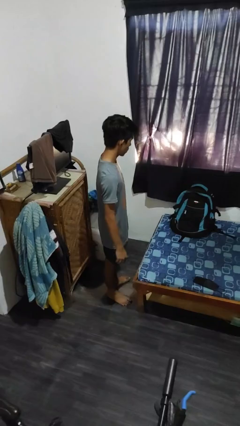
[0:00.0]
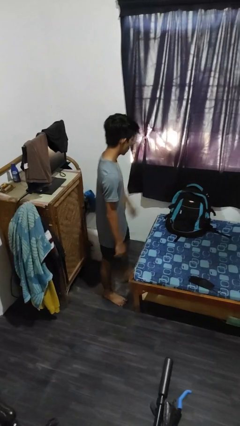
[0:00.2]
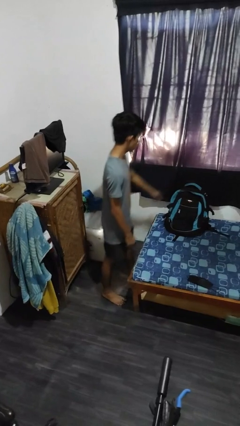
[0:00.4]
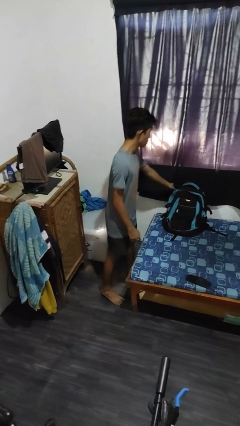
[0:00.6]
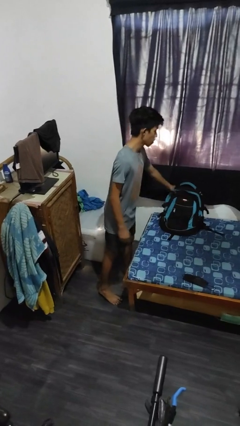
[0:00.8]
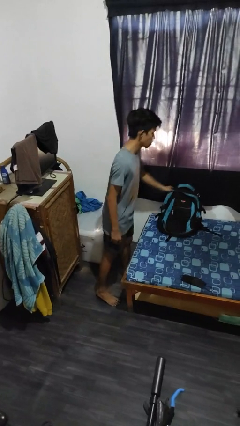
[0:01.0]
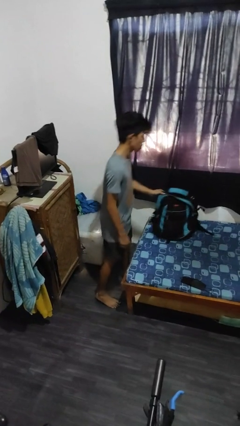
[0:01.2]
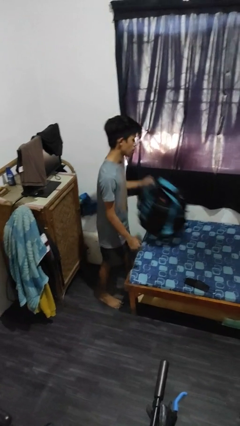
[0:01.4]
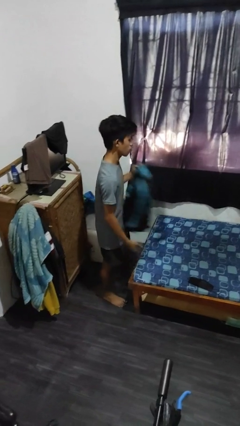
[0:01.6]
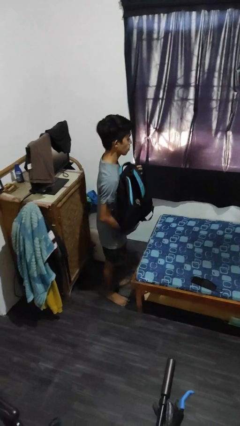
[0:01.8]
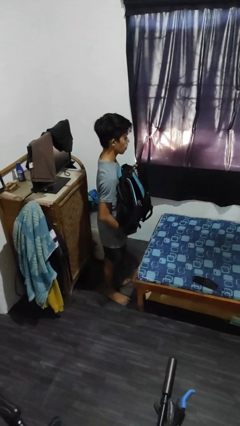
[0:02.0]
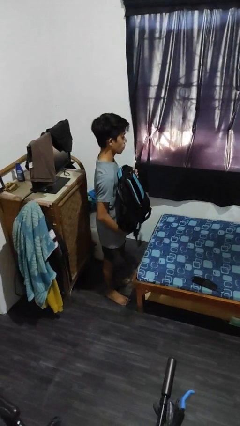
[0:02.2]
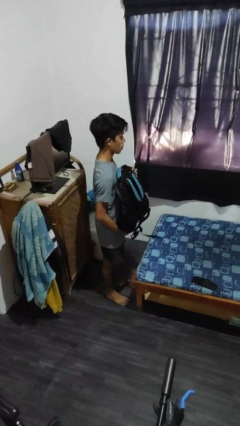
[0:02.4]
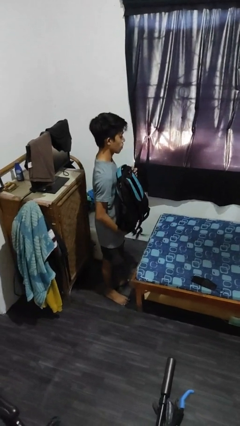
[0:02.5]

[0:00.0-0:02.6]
person picks up object from bed

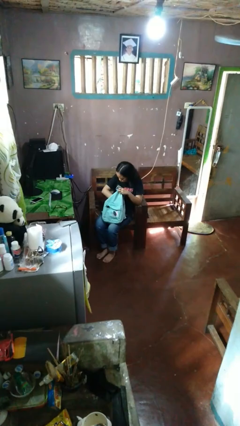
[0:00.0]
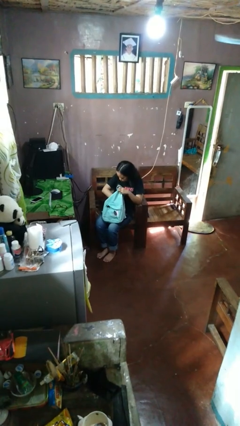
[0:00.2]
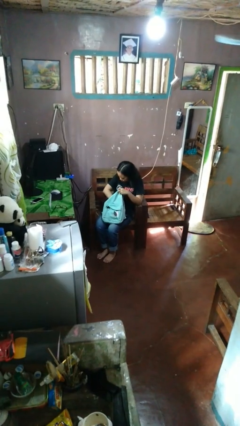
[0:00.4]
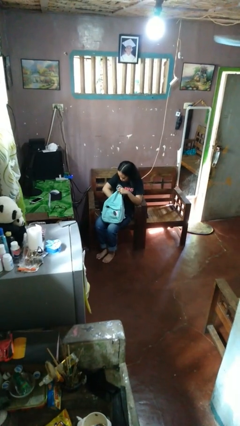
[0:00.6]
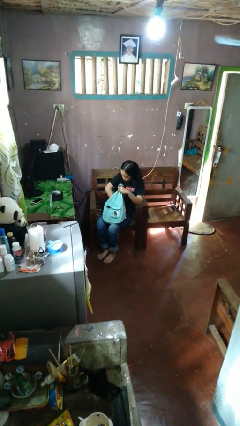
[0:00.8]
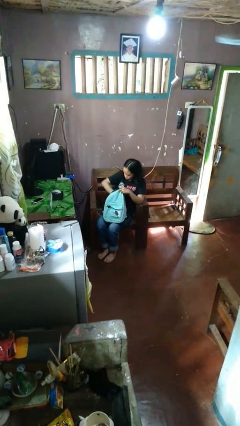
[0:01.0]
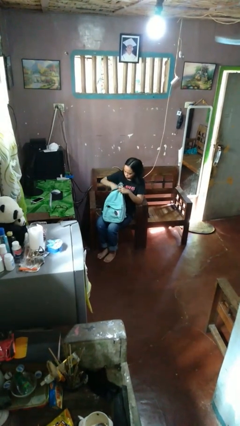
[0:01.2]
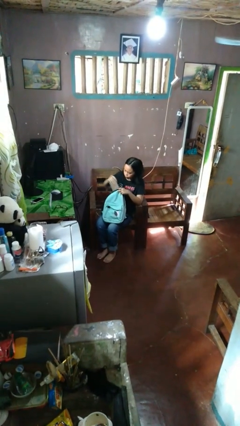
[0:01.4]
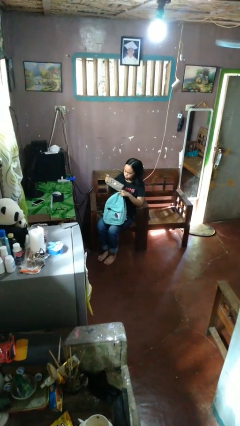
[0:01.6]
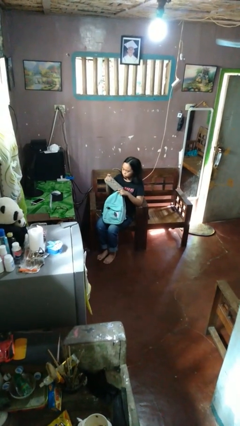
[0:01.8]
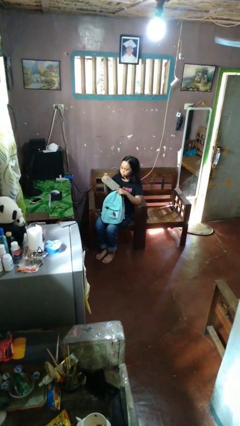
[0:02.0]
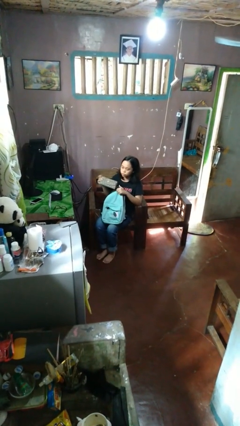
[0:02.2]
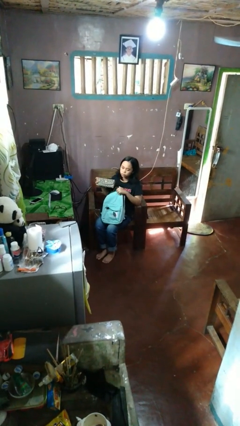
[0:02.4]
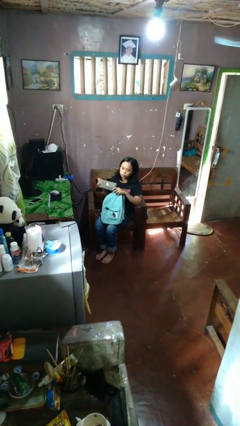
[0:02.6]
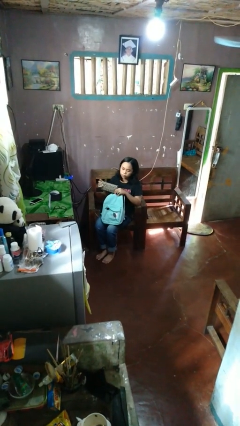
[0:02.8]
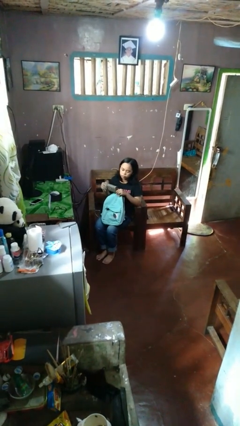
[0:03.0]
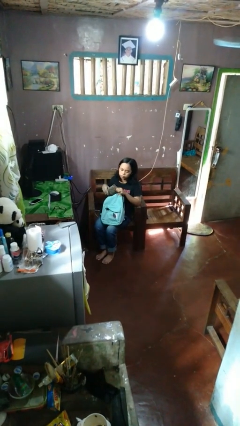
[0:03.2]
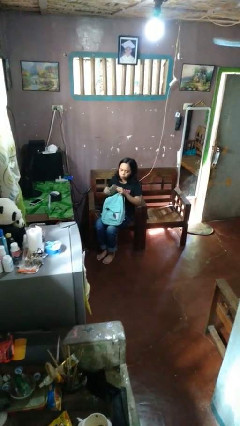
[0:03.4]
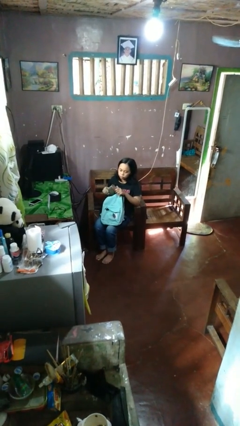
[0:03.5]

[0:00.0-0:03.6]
person takes object from backpack

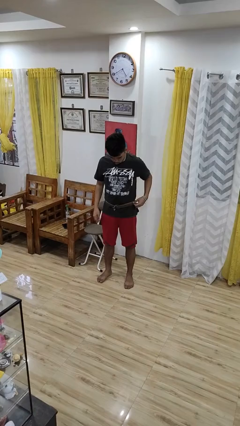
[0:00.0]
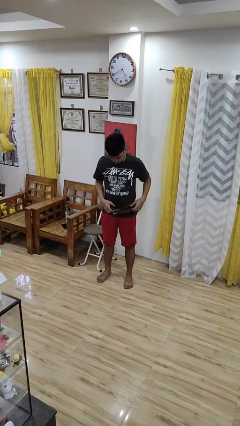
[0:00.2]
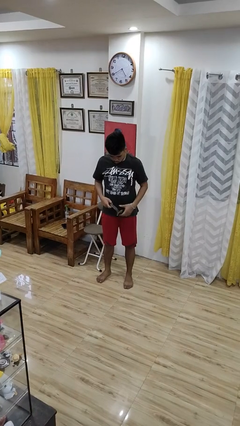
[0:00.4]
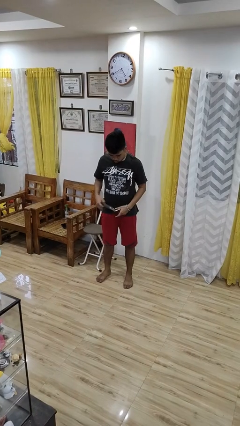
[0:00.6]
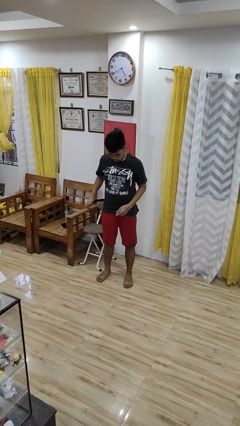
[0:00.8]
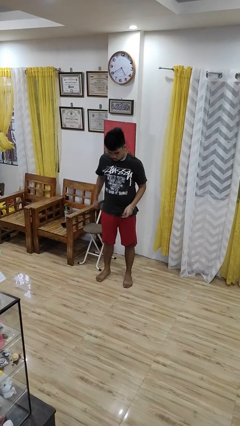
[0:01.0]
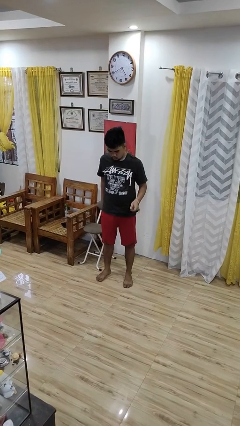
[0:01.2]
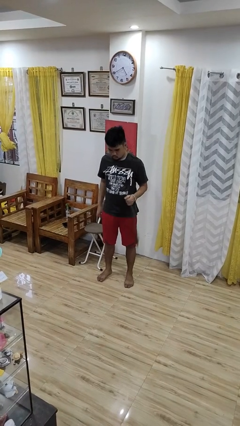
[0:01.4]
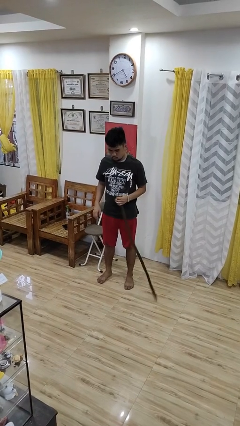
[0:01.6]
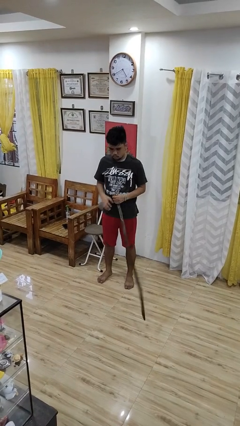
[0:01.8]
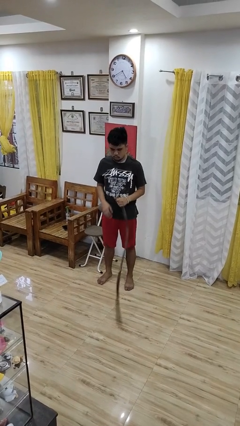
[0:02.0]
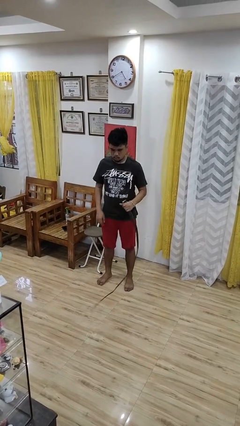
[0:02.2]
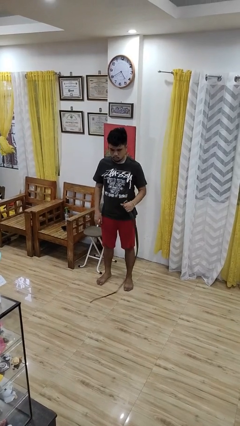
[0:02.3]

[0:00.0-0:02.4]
person takes off belt

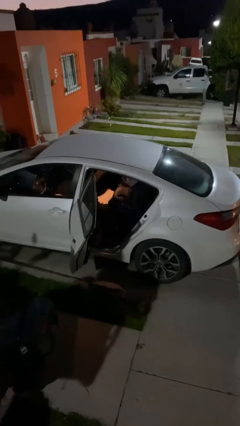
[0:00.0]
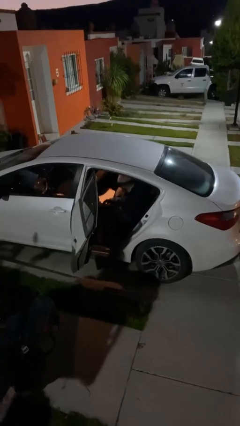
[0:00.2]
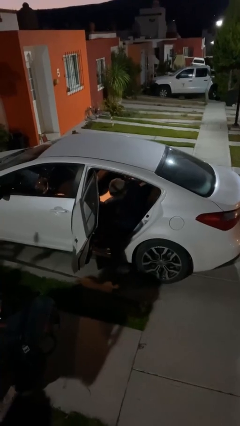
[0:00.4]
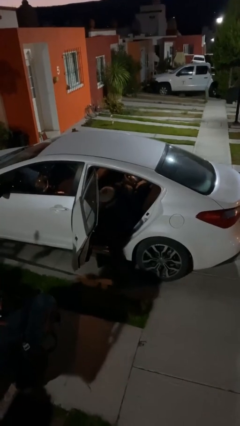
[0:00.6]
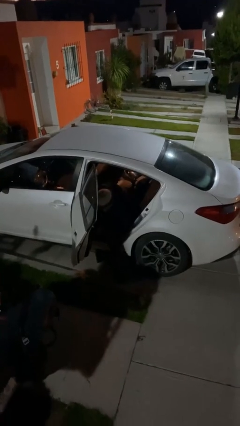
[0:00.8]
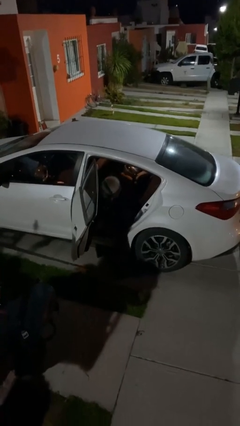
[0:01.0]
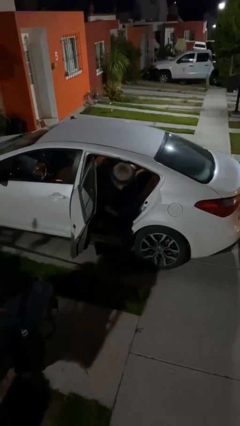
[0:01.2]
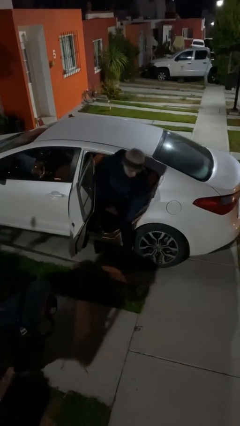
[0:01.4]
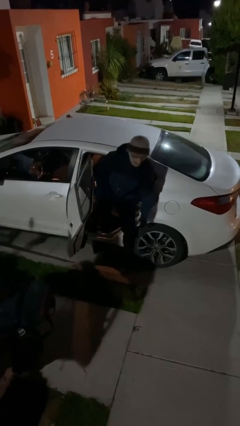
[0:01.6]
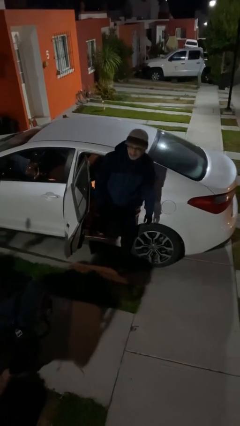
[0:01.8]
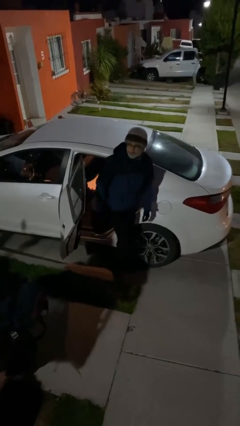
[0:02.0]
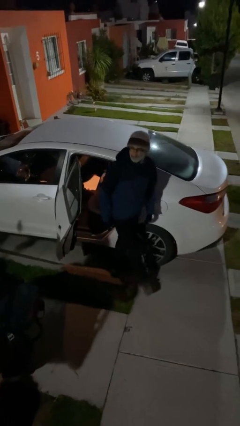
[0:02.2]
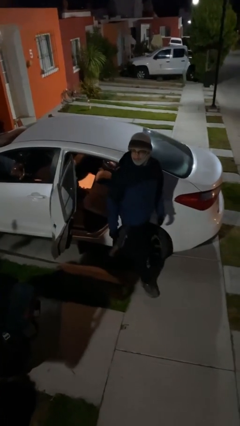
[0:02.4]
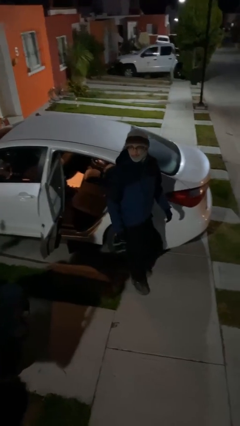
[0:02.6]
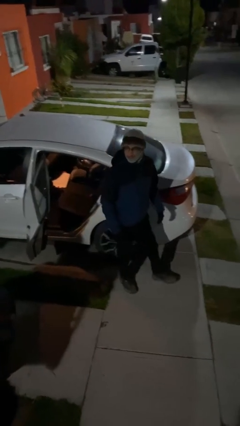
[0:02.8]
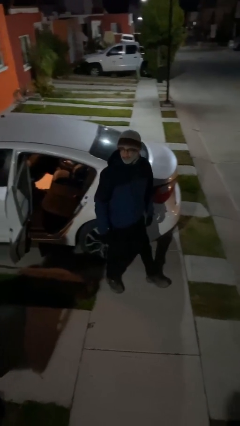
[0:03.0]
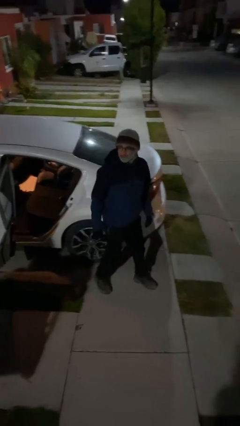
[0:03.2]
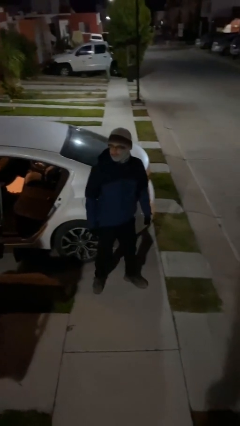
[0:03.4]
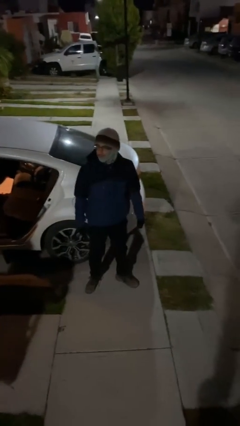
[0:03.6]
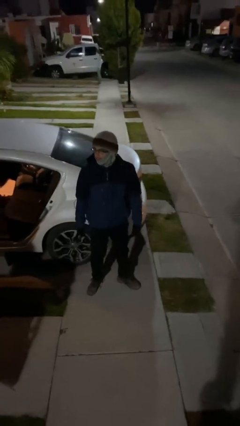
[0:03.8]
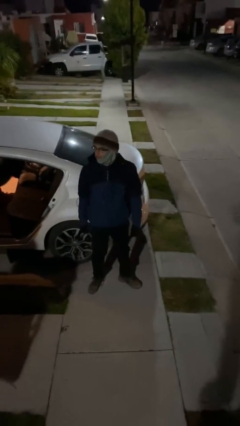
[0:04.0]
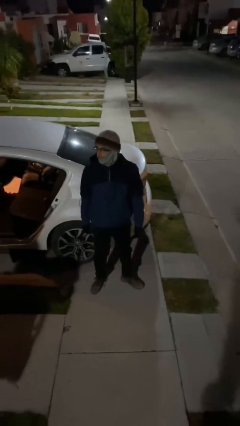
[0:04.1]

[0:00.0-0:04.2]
person exits car

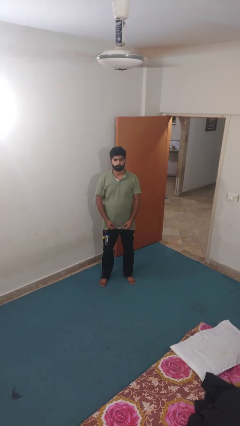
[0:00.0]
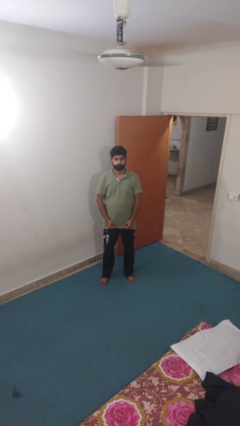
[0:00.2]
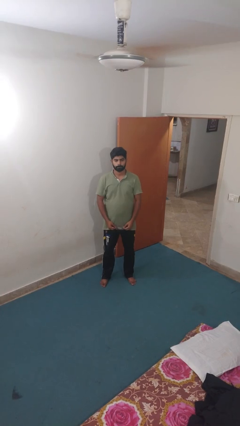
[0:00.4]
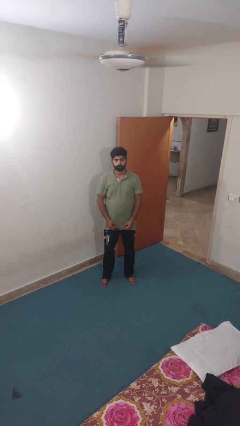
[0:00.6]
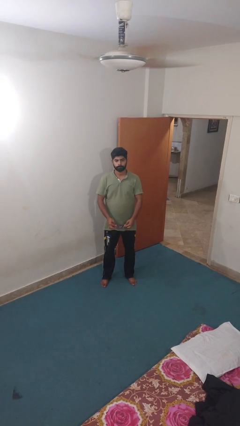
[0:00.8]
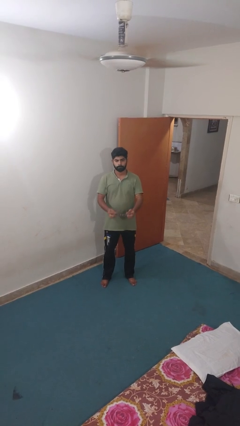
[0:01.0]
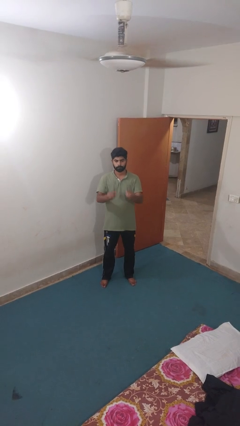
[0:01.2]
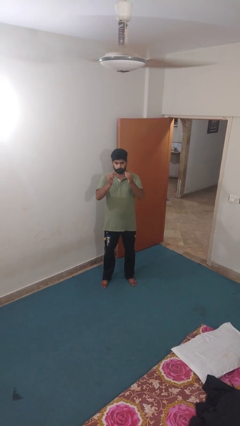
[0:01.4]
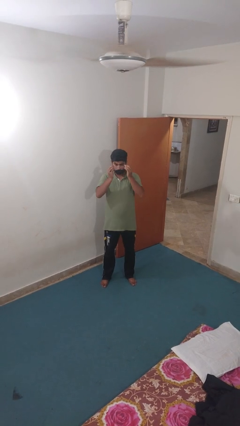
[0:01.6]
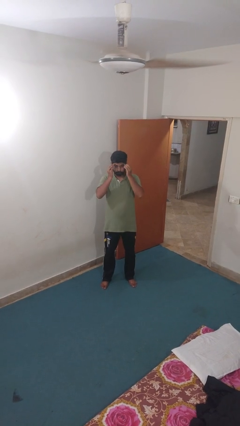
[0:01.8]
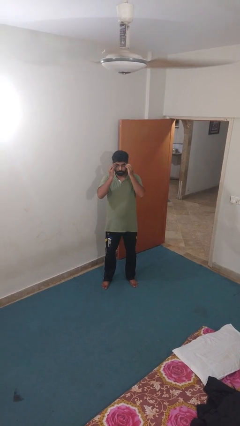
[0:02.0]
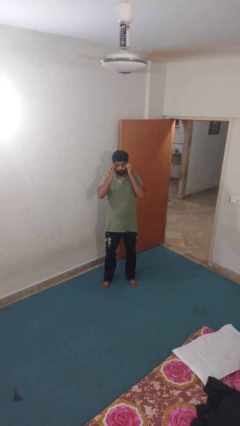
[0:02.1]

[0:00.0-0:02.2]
person puts on glasses

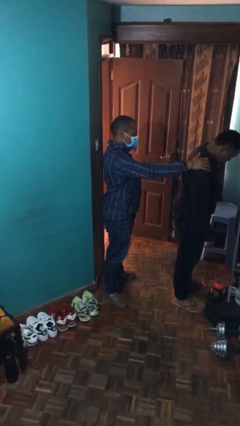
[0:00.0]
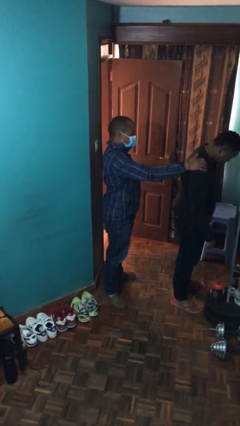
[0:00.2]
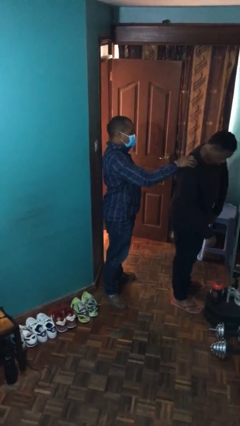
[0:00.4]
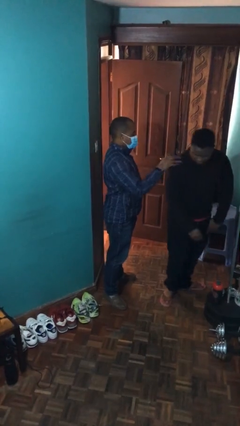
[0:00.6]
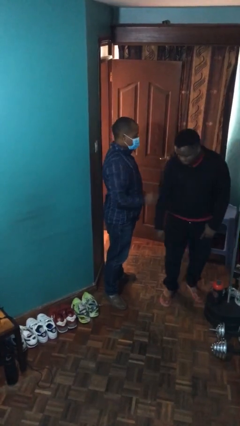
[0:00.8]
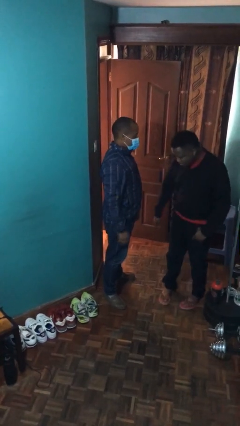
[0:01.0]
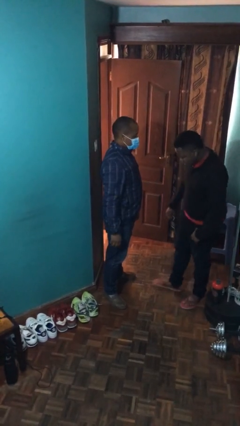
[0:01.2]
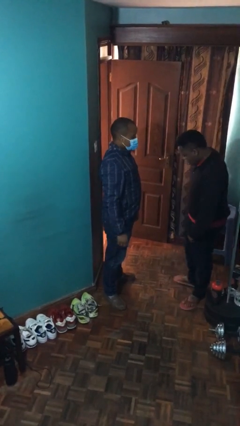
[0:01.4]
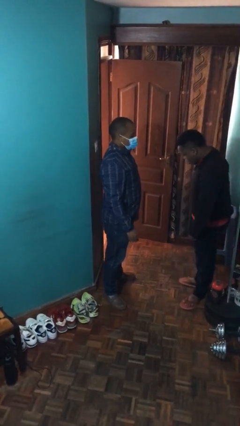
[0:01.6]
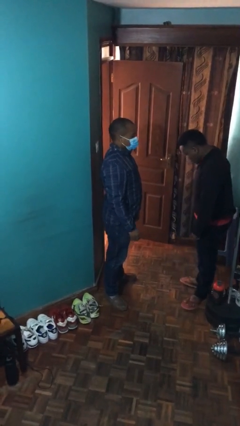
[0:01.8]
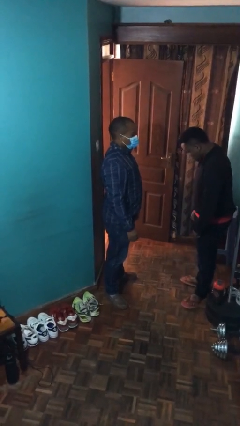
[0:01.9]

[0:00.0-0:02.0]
person spins person around

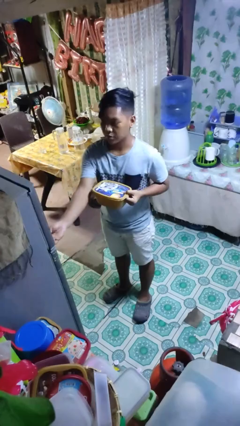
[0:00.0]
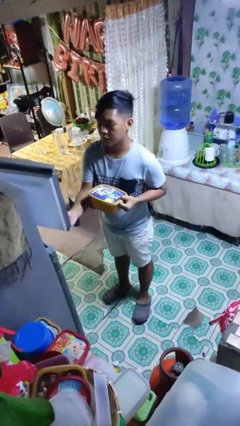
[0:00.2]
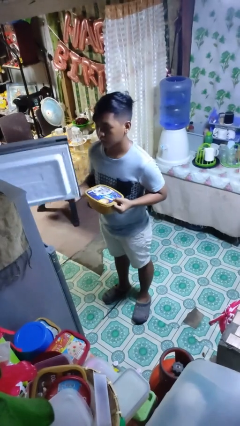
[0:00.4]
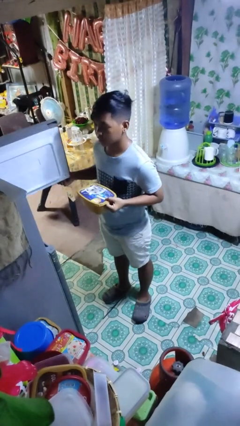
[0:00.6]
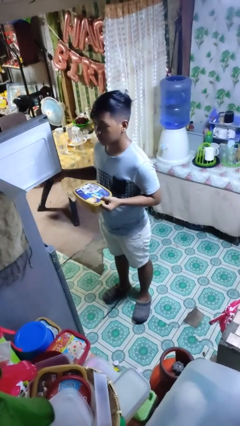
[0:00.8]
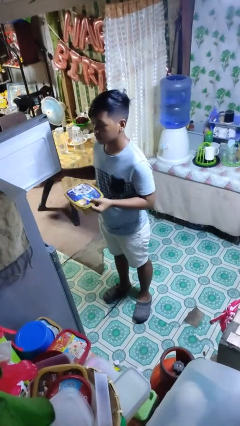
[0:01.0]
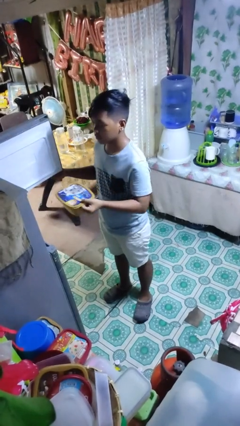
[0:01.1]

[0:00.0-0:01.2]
person opens refrigerator
